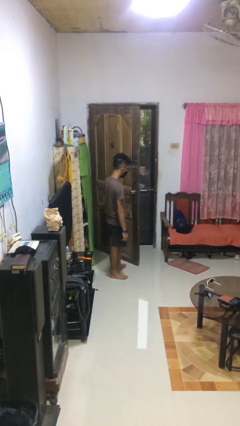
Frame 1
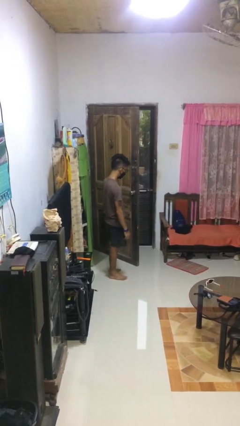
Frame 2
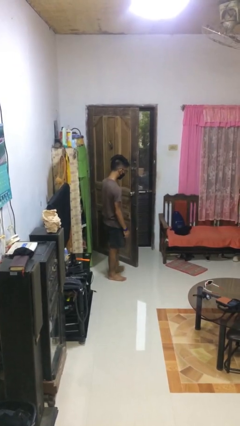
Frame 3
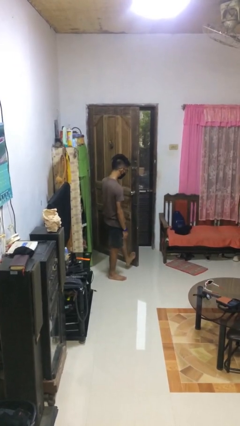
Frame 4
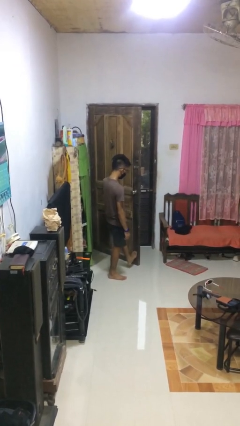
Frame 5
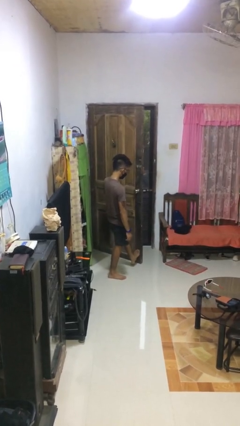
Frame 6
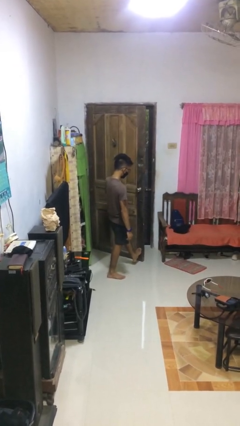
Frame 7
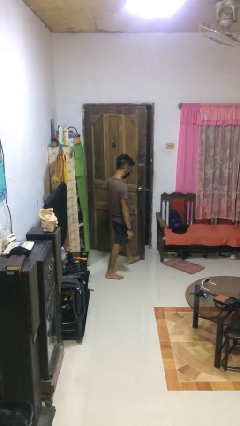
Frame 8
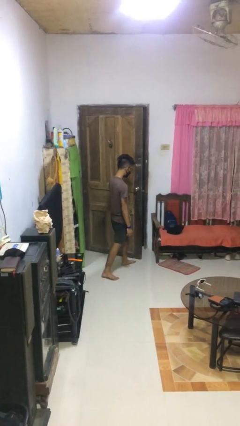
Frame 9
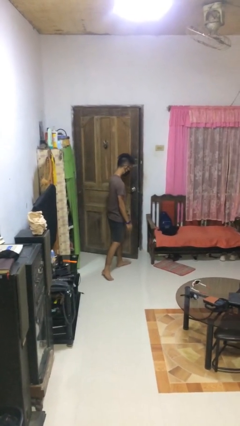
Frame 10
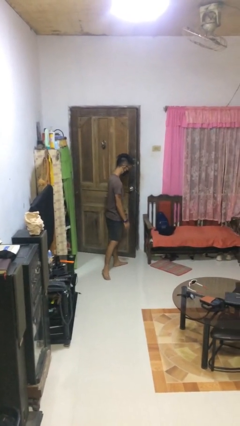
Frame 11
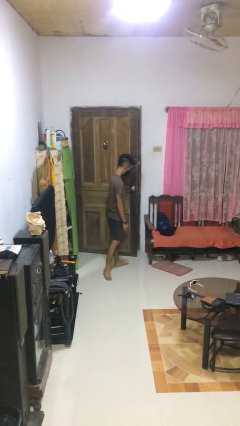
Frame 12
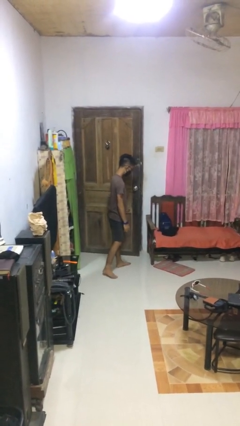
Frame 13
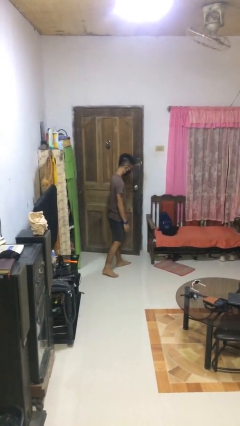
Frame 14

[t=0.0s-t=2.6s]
person closes door with foot

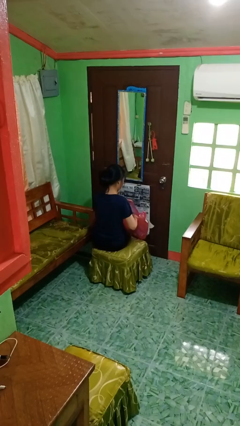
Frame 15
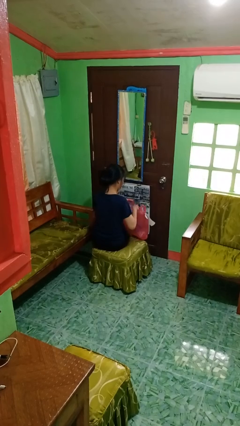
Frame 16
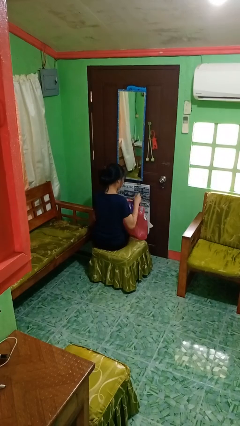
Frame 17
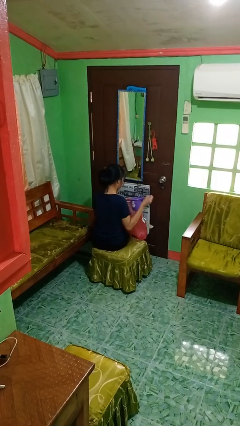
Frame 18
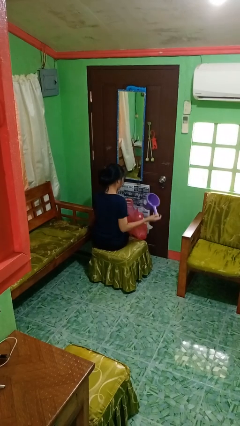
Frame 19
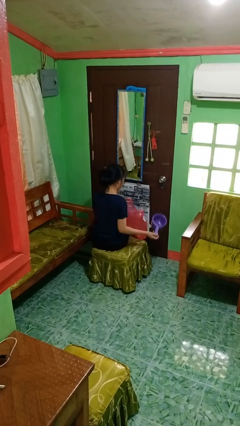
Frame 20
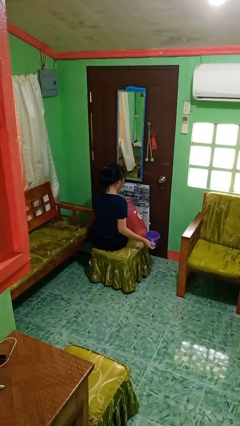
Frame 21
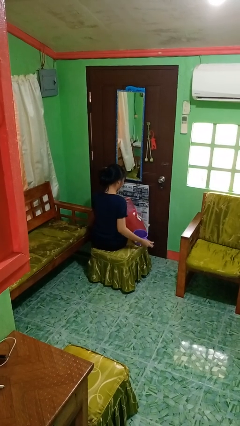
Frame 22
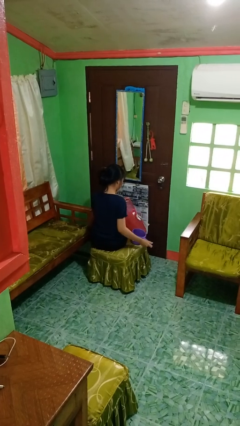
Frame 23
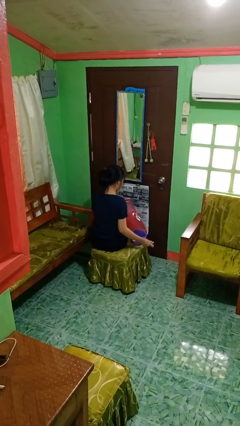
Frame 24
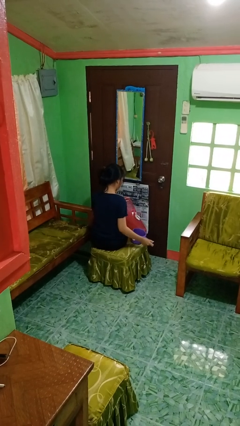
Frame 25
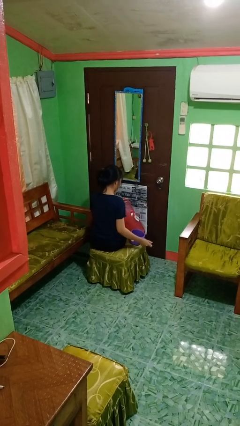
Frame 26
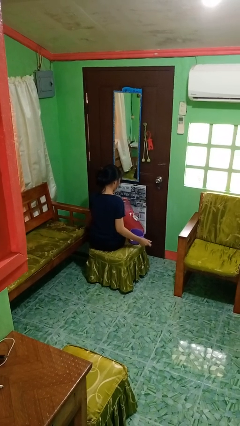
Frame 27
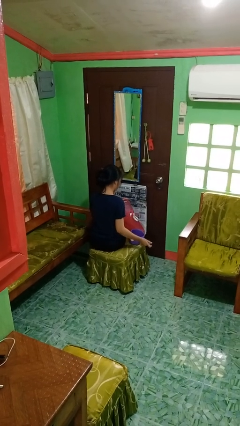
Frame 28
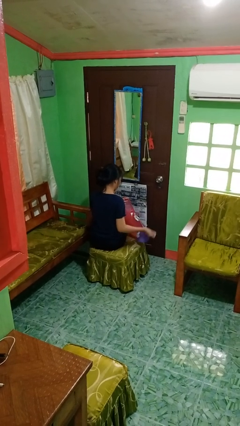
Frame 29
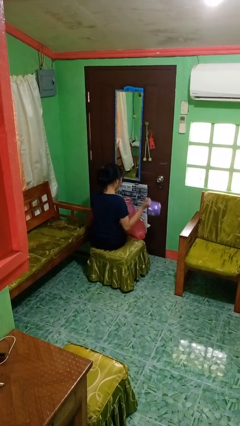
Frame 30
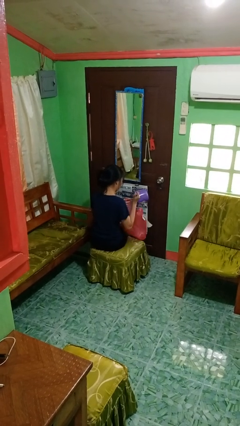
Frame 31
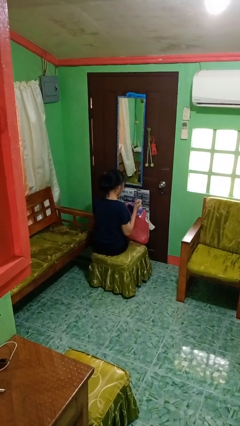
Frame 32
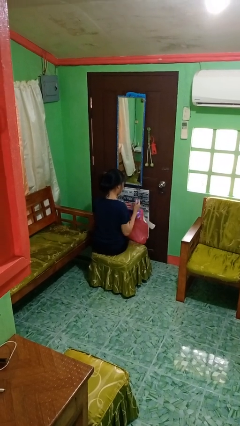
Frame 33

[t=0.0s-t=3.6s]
person takes object from bag

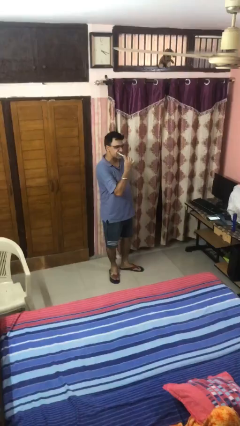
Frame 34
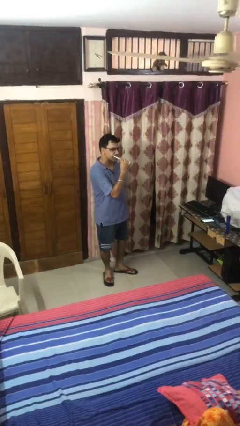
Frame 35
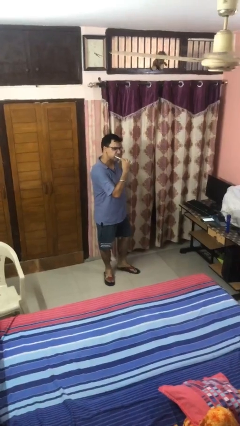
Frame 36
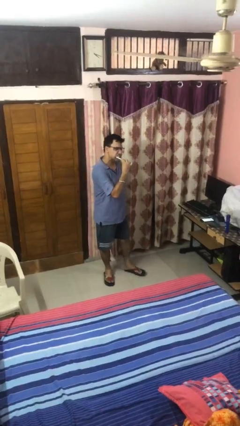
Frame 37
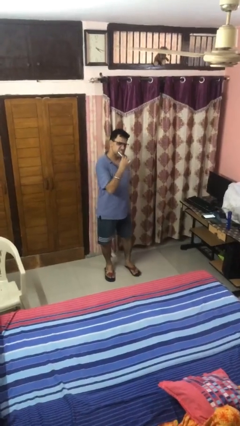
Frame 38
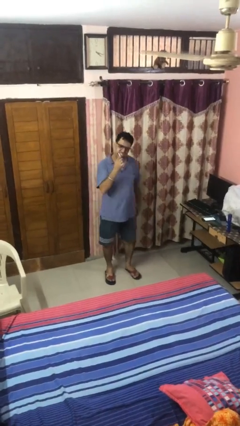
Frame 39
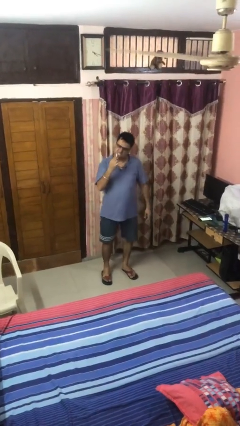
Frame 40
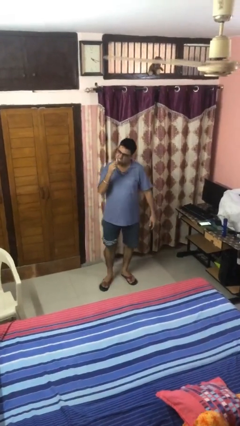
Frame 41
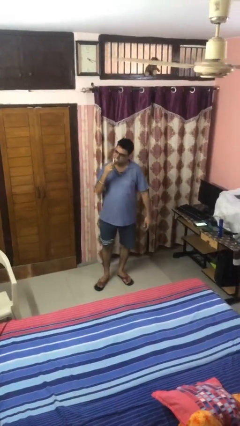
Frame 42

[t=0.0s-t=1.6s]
person brushes teeth

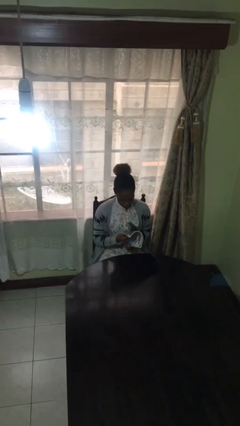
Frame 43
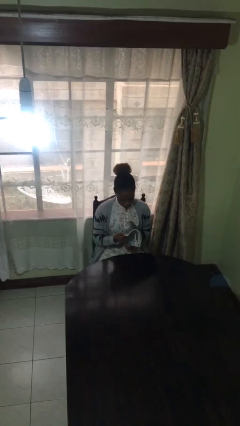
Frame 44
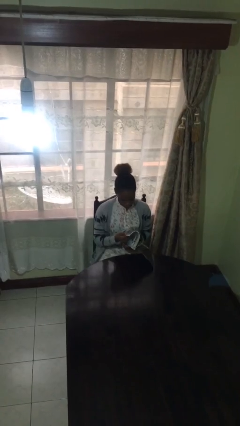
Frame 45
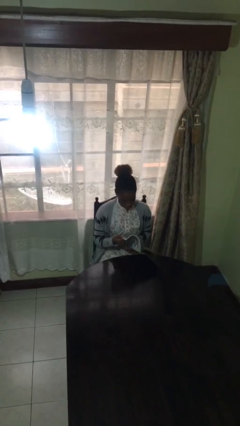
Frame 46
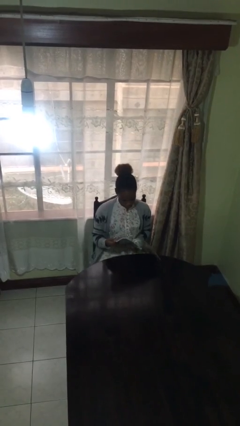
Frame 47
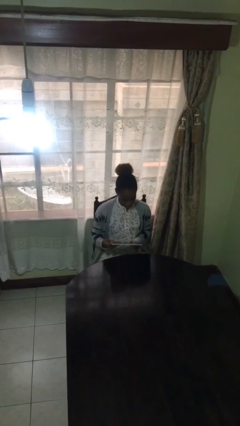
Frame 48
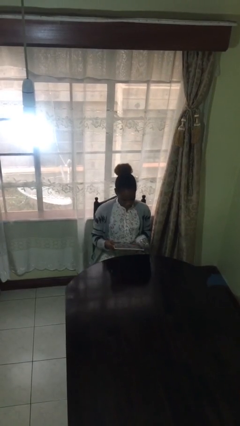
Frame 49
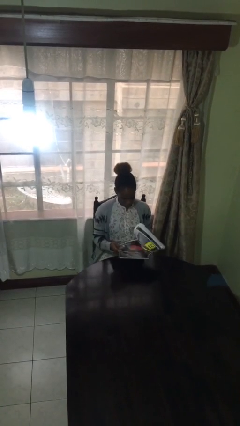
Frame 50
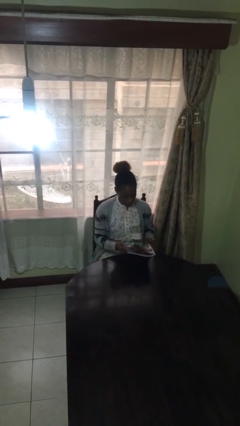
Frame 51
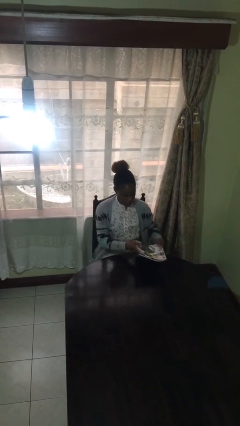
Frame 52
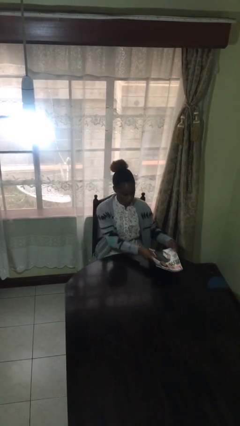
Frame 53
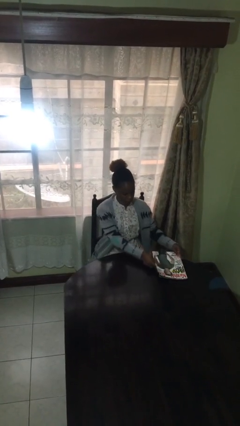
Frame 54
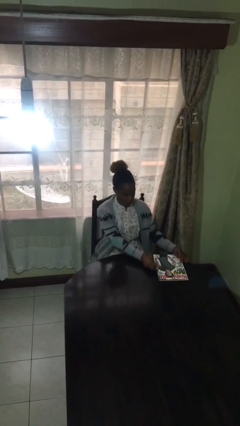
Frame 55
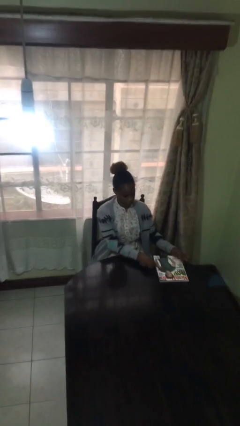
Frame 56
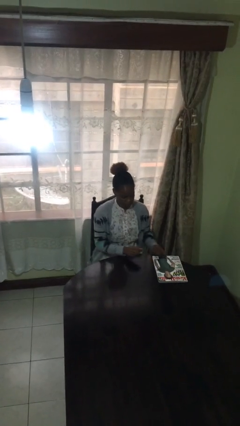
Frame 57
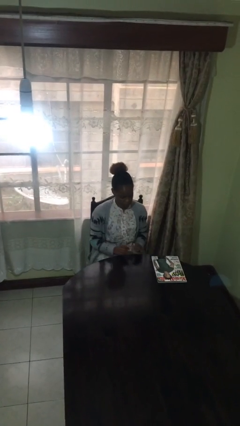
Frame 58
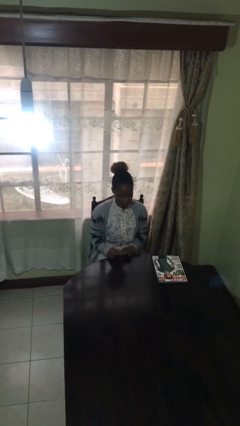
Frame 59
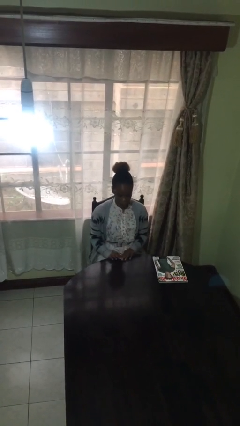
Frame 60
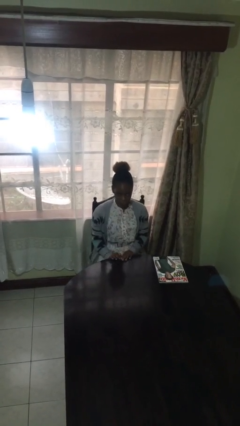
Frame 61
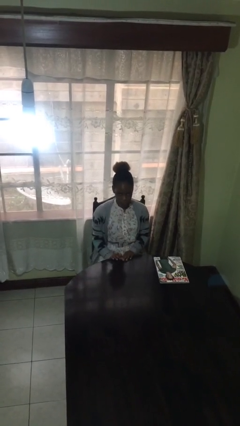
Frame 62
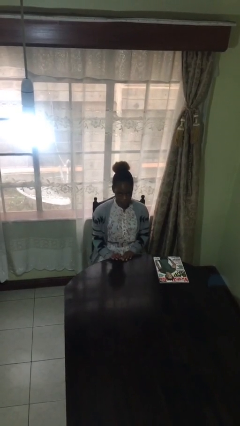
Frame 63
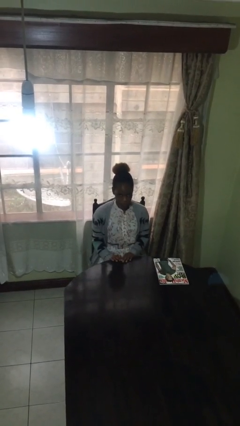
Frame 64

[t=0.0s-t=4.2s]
person puts down object on table

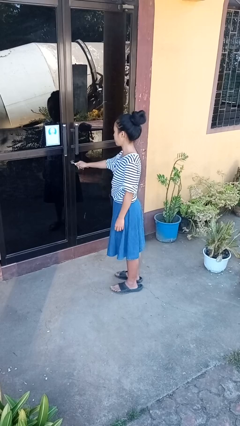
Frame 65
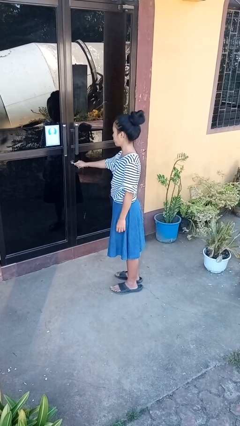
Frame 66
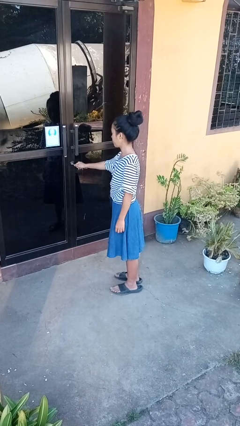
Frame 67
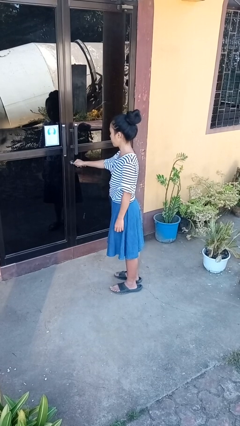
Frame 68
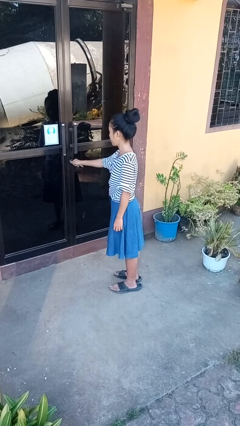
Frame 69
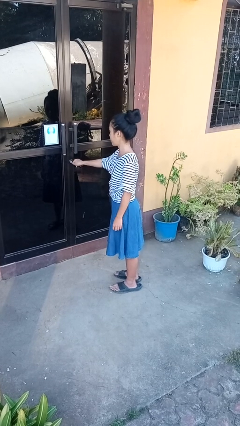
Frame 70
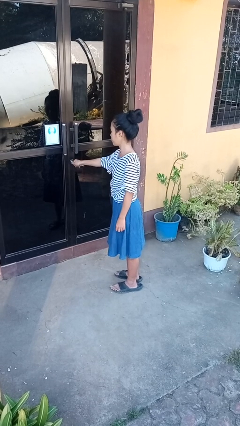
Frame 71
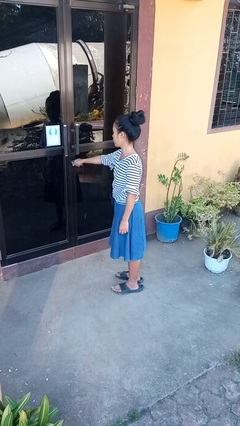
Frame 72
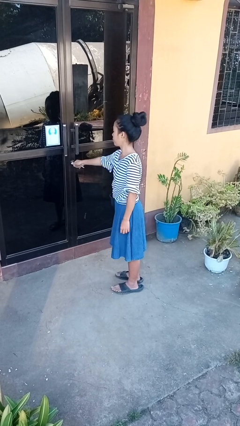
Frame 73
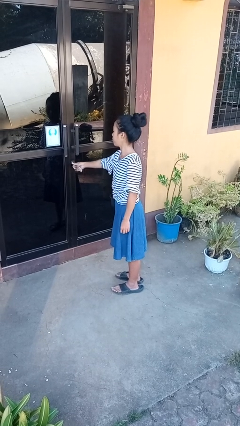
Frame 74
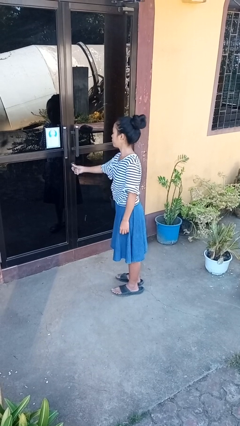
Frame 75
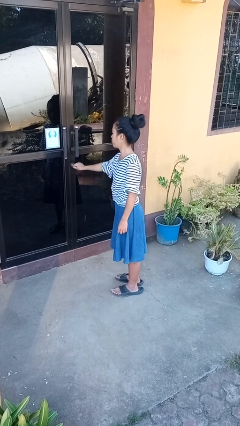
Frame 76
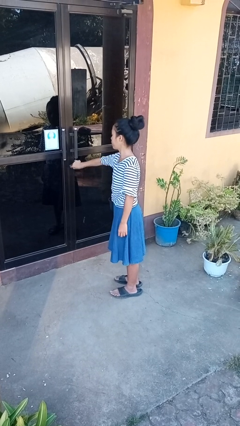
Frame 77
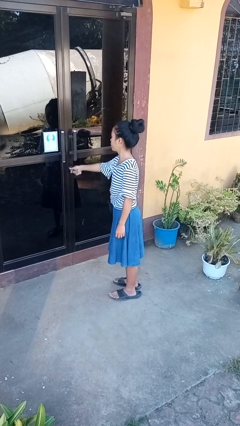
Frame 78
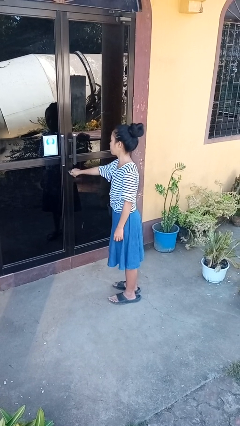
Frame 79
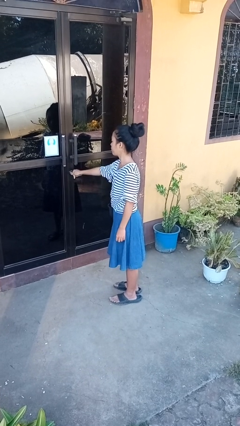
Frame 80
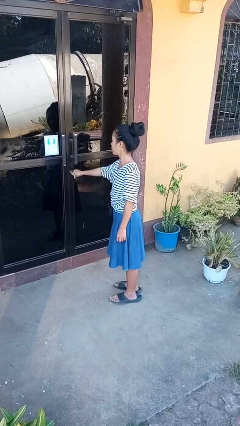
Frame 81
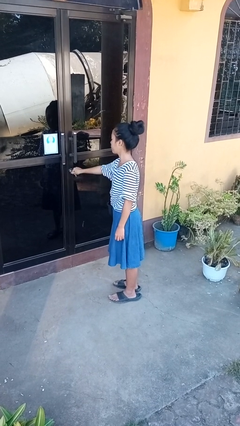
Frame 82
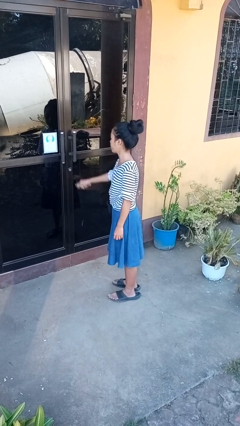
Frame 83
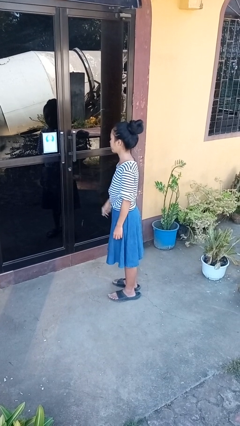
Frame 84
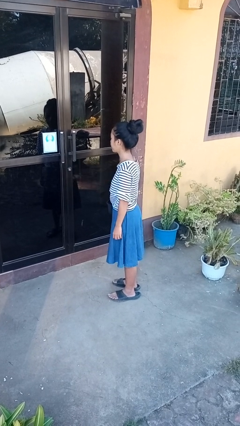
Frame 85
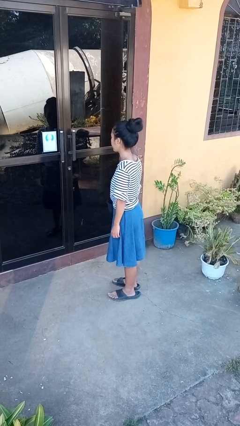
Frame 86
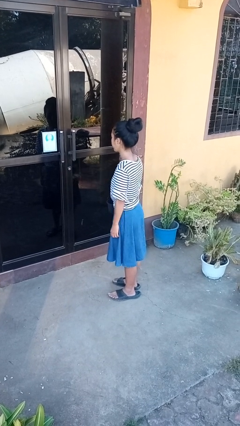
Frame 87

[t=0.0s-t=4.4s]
person locks door with keys

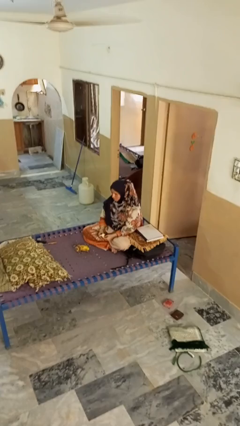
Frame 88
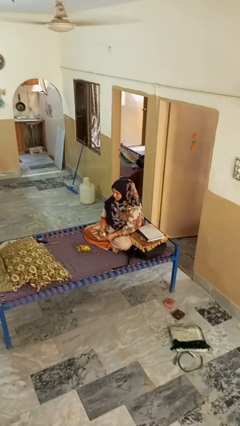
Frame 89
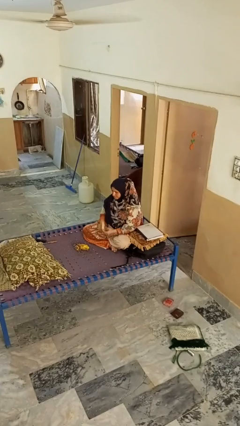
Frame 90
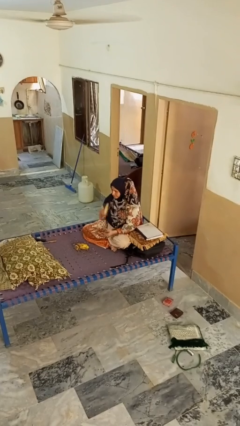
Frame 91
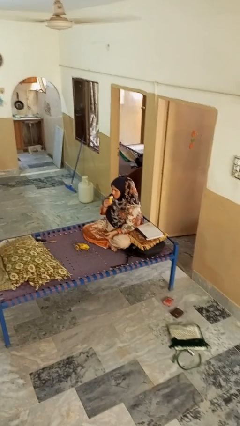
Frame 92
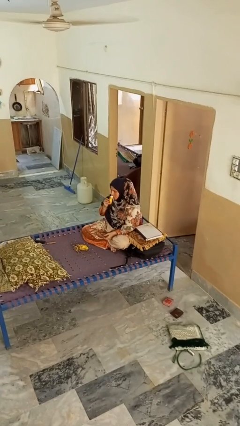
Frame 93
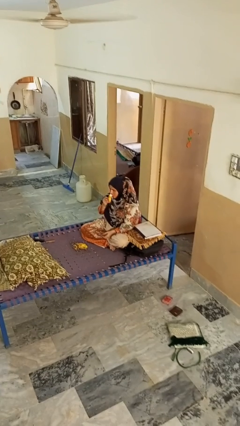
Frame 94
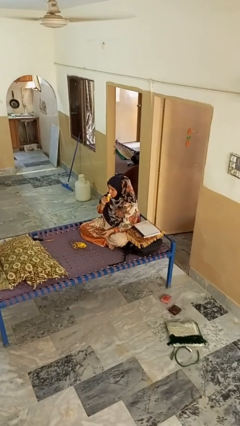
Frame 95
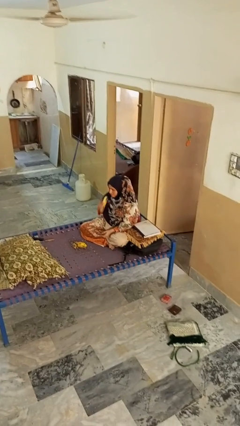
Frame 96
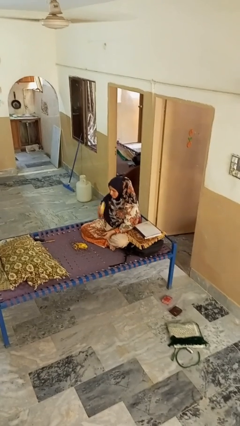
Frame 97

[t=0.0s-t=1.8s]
person eats banana
